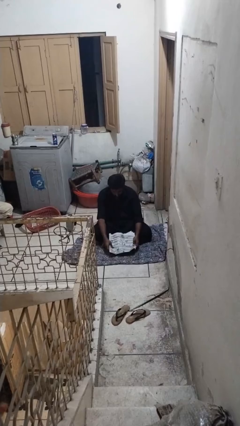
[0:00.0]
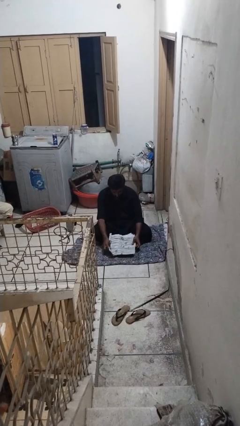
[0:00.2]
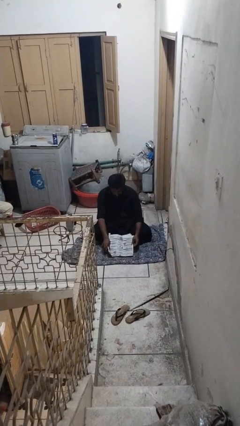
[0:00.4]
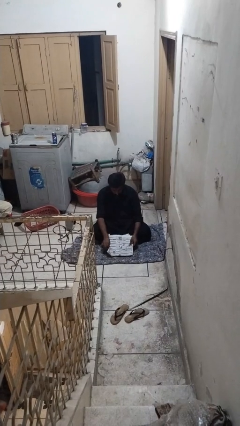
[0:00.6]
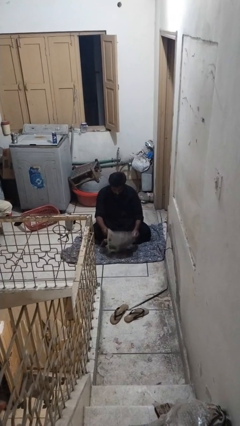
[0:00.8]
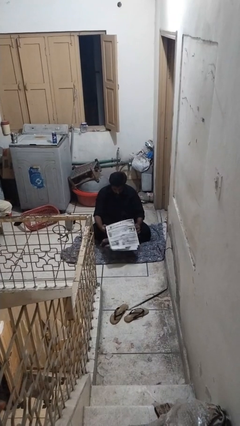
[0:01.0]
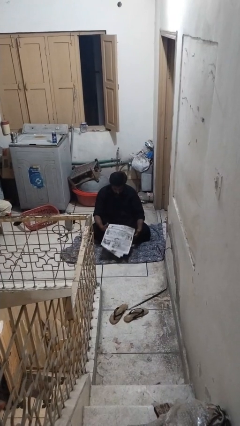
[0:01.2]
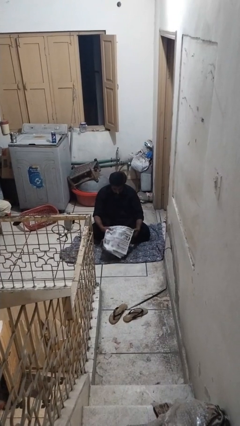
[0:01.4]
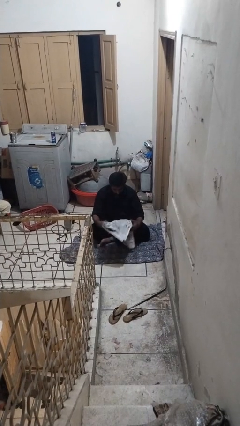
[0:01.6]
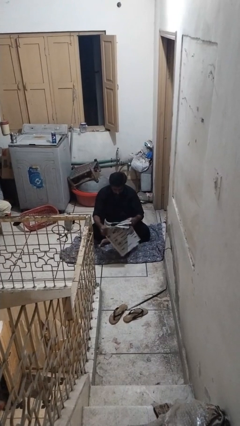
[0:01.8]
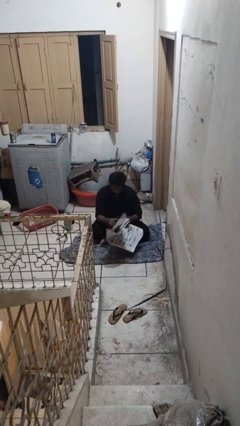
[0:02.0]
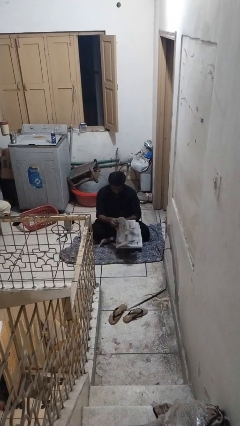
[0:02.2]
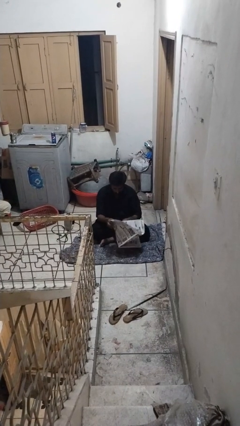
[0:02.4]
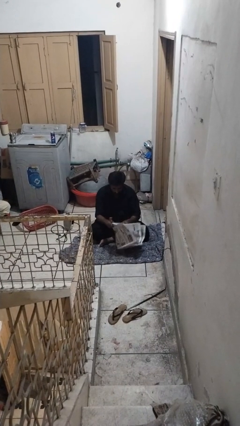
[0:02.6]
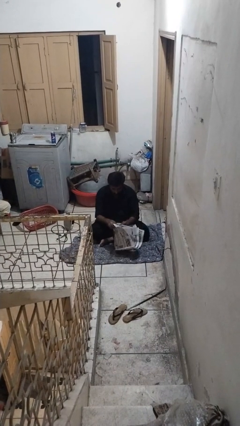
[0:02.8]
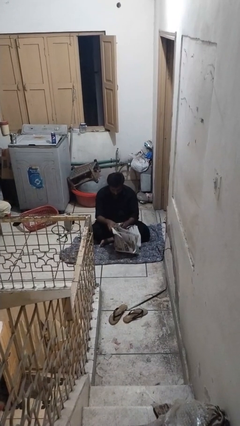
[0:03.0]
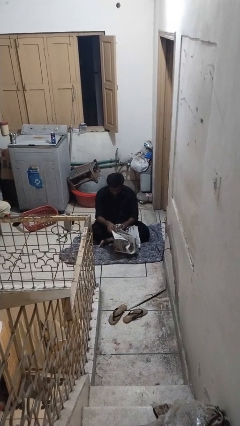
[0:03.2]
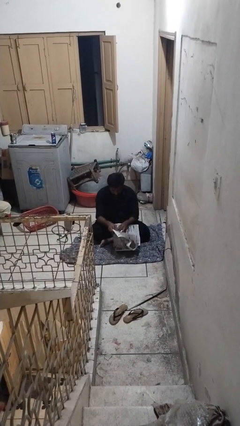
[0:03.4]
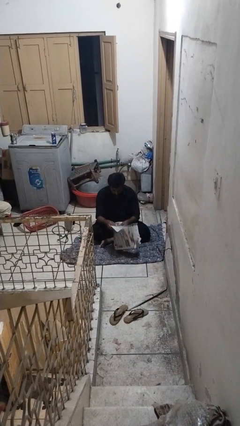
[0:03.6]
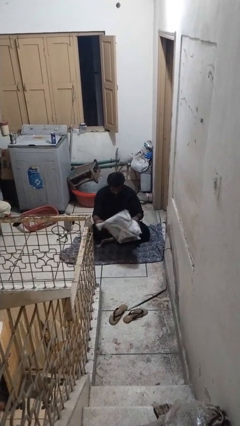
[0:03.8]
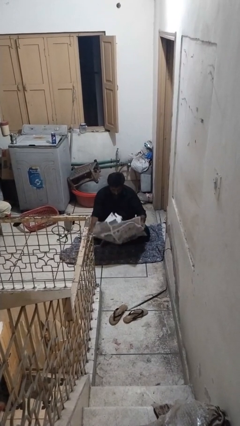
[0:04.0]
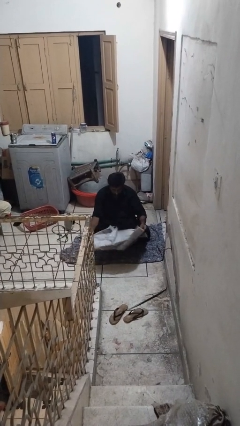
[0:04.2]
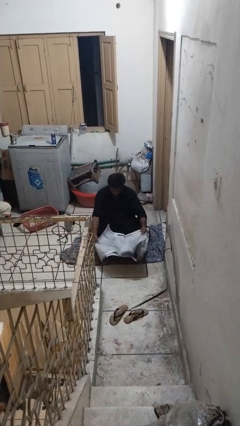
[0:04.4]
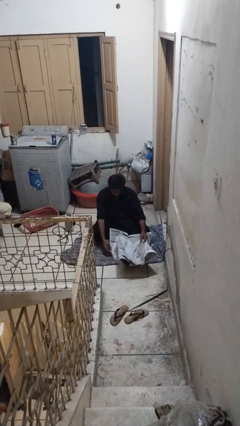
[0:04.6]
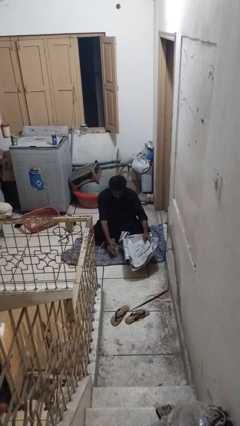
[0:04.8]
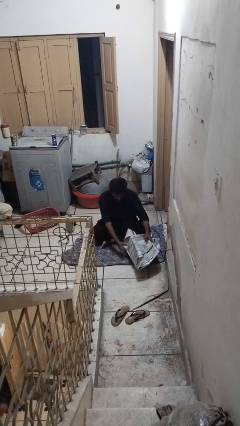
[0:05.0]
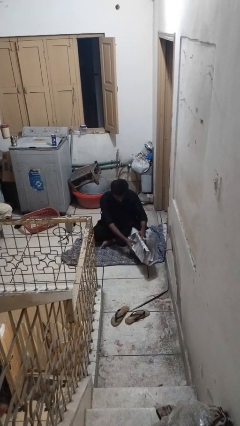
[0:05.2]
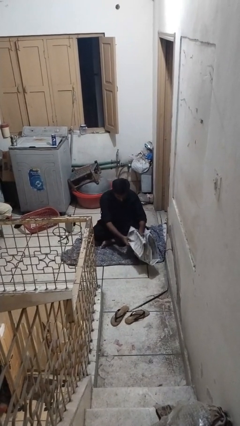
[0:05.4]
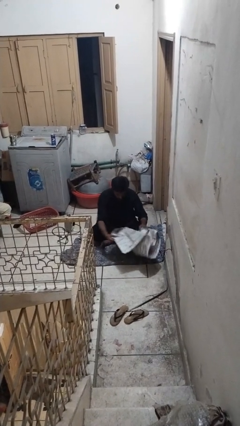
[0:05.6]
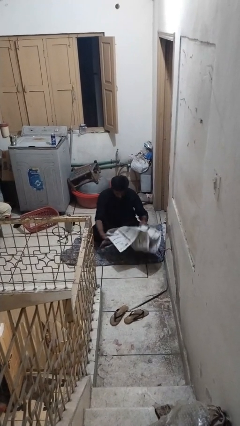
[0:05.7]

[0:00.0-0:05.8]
person reads newspaper

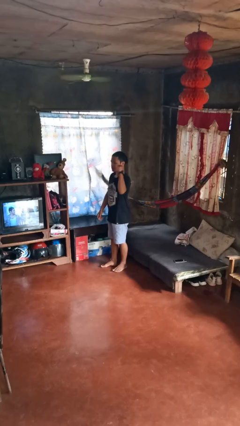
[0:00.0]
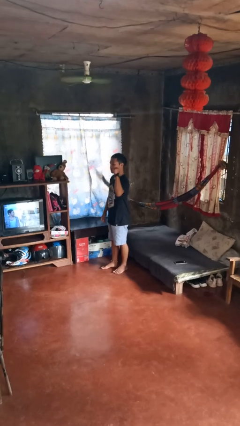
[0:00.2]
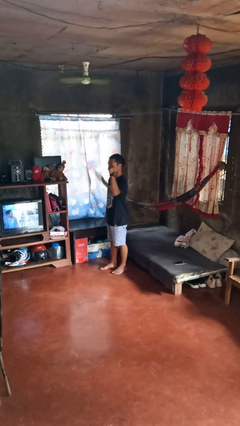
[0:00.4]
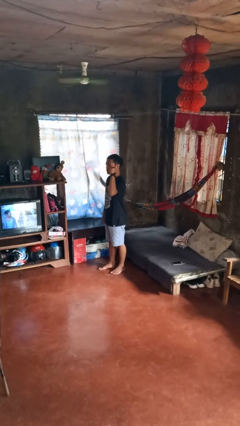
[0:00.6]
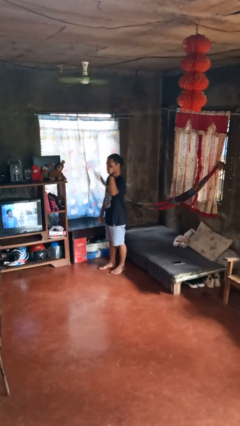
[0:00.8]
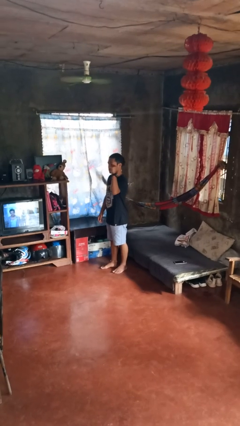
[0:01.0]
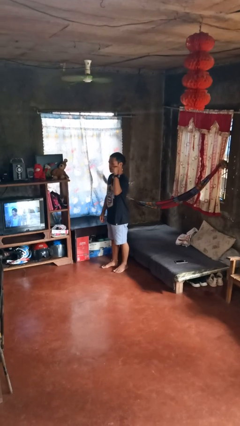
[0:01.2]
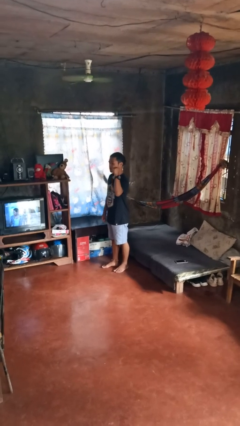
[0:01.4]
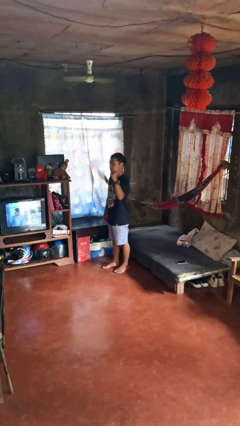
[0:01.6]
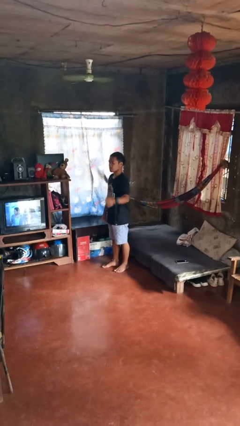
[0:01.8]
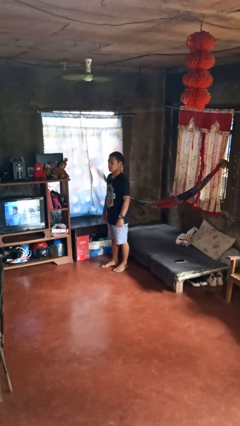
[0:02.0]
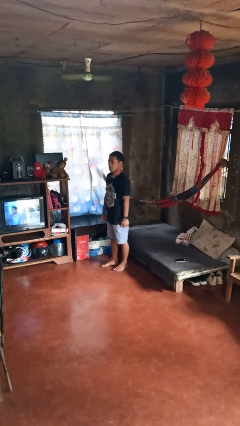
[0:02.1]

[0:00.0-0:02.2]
person gestures behind me

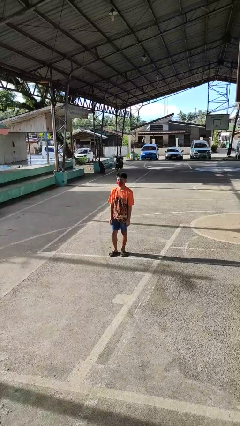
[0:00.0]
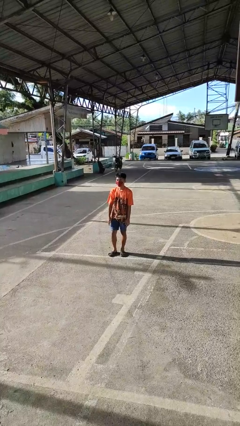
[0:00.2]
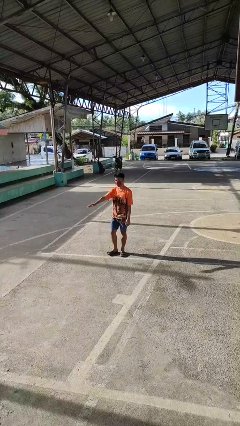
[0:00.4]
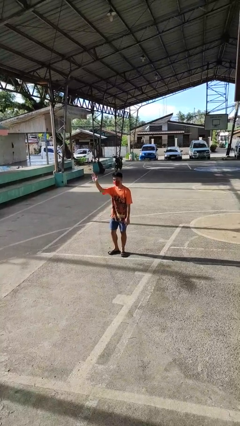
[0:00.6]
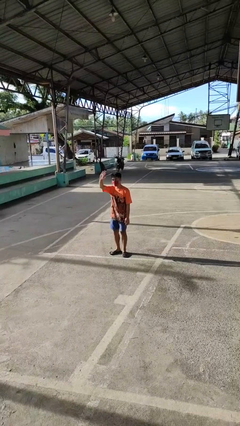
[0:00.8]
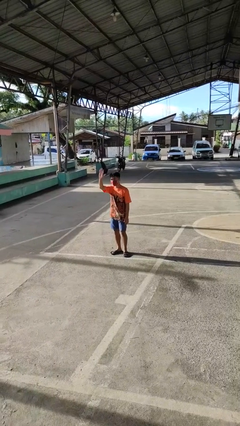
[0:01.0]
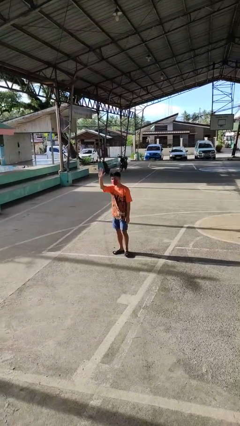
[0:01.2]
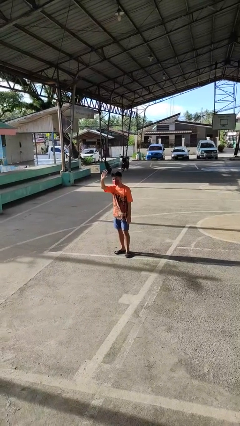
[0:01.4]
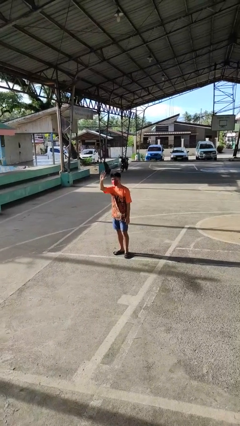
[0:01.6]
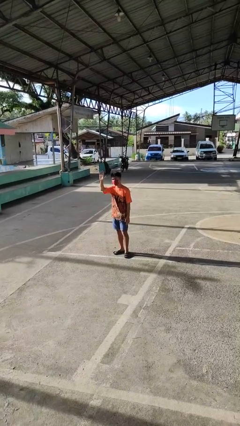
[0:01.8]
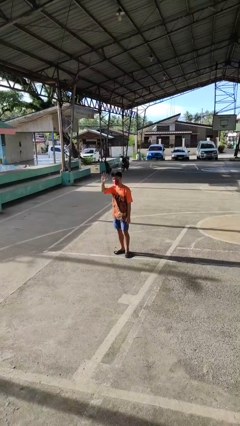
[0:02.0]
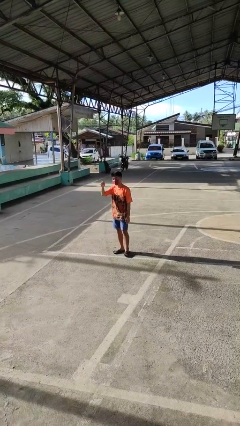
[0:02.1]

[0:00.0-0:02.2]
person waves at person

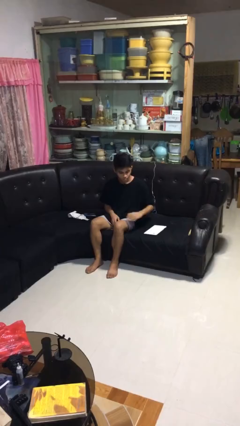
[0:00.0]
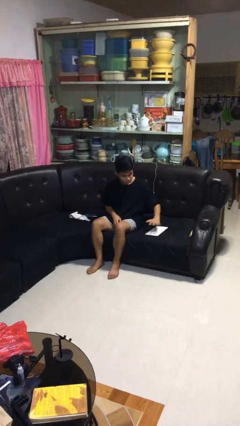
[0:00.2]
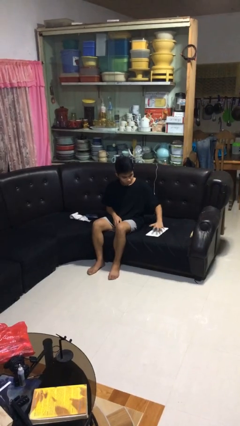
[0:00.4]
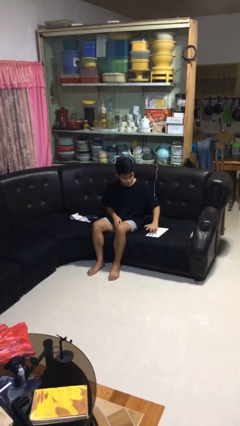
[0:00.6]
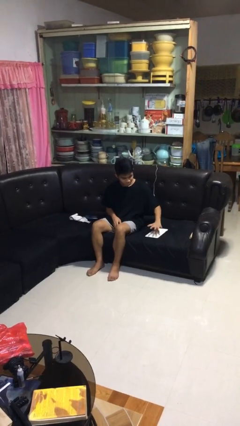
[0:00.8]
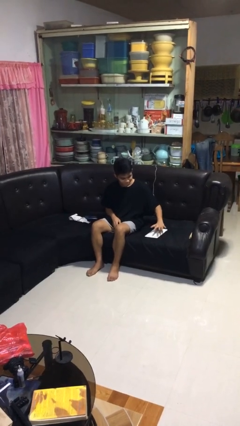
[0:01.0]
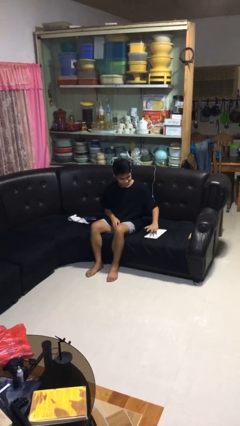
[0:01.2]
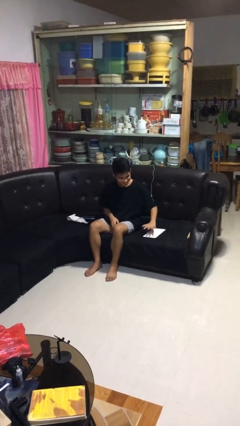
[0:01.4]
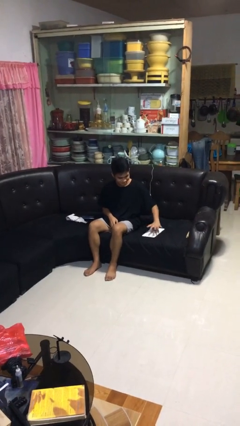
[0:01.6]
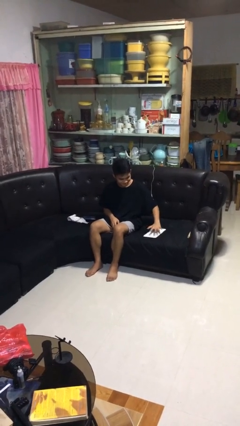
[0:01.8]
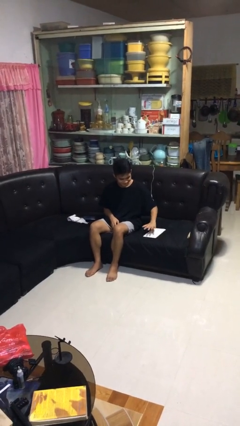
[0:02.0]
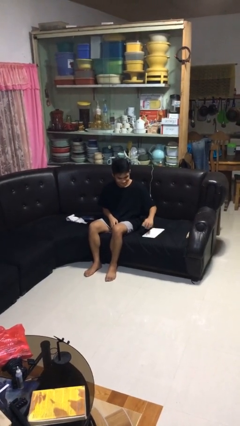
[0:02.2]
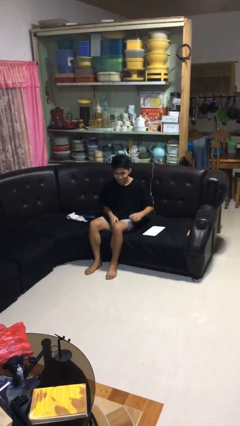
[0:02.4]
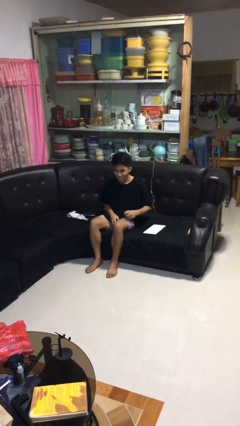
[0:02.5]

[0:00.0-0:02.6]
person waves hand over object

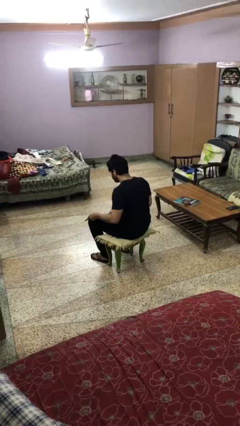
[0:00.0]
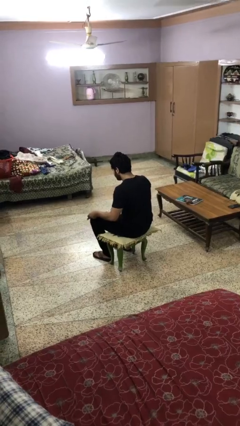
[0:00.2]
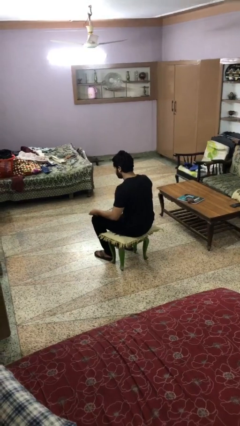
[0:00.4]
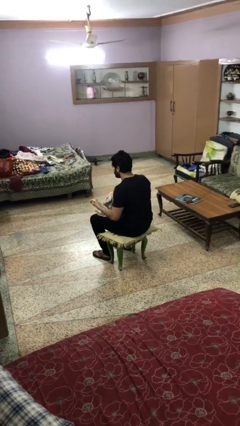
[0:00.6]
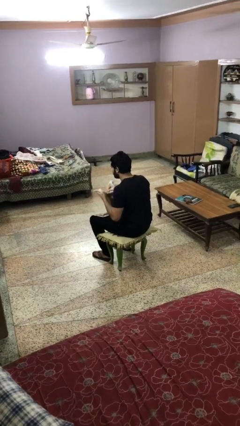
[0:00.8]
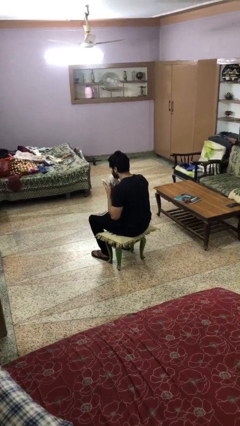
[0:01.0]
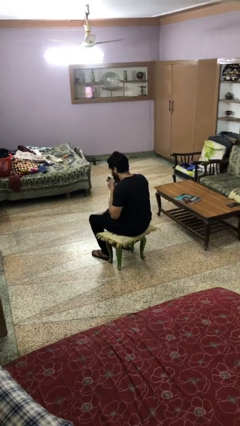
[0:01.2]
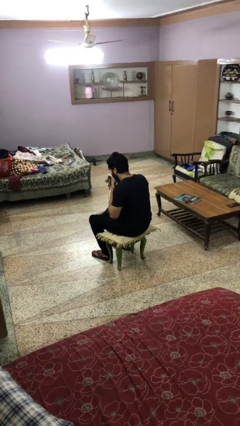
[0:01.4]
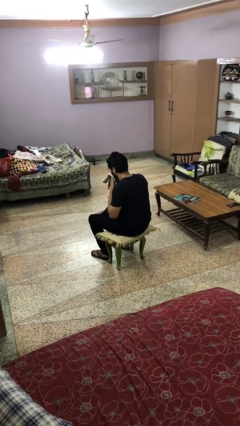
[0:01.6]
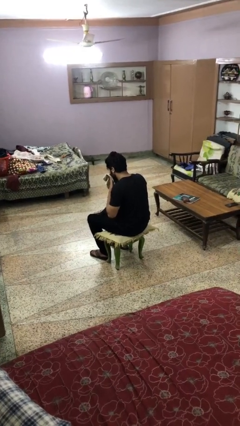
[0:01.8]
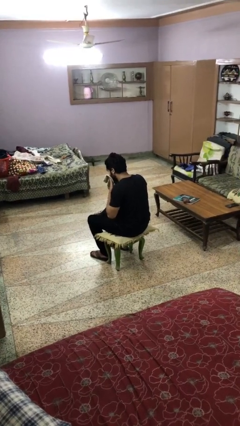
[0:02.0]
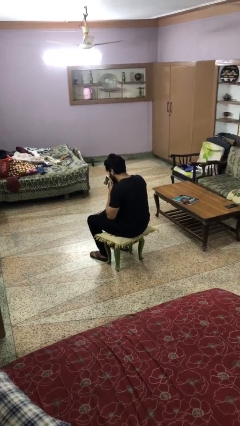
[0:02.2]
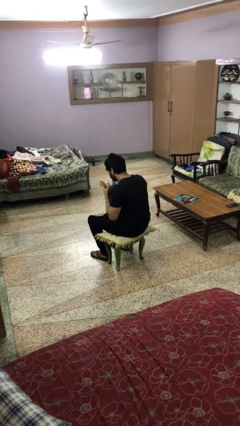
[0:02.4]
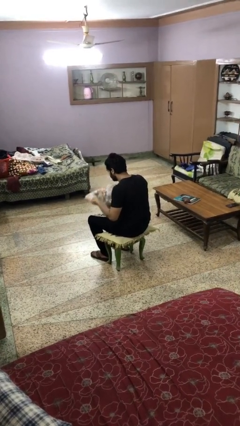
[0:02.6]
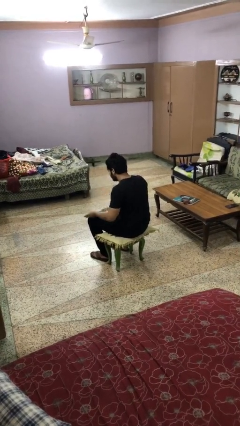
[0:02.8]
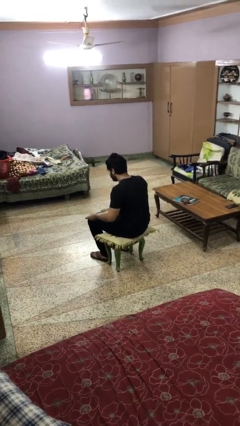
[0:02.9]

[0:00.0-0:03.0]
person wipes mouth with napkin

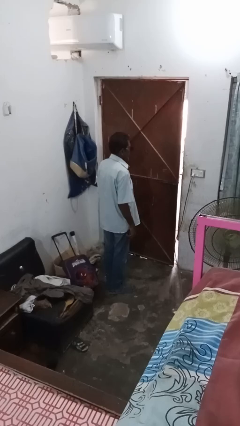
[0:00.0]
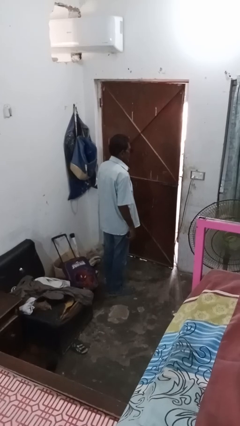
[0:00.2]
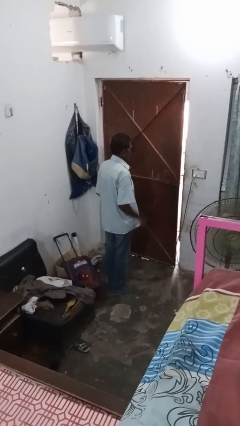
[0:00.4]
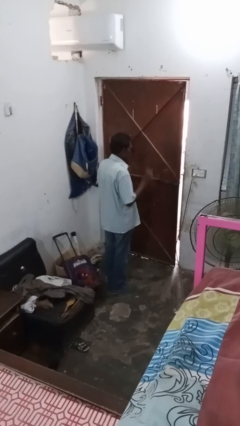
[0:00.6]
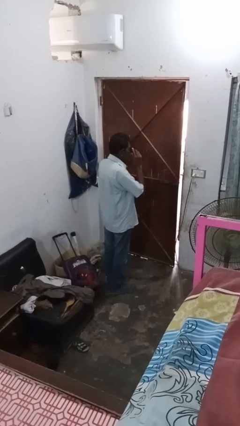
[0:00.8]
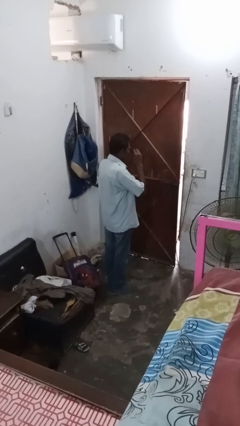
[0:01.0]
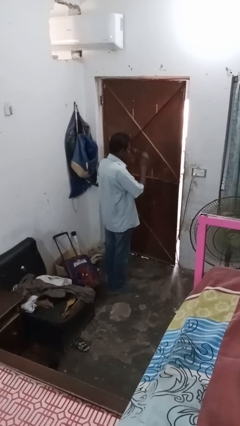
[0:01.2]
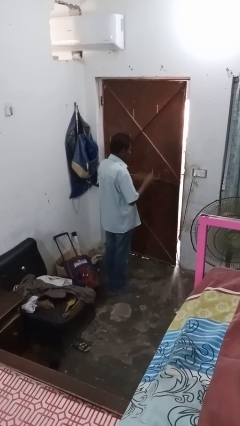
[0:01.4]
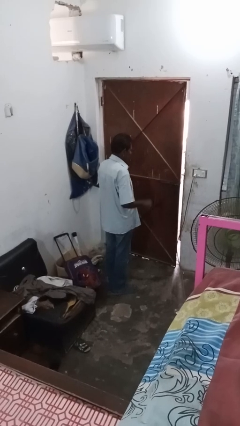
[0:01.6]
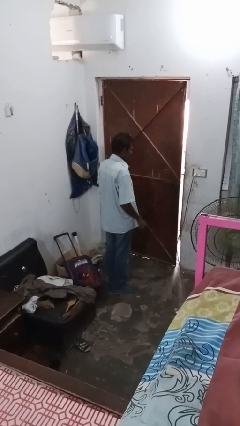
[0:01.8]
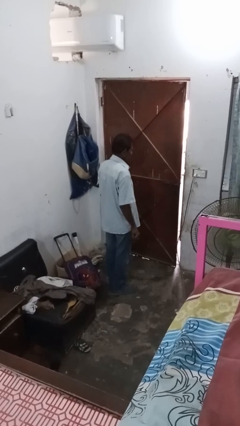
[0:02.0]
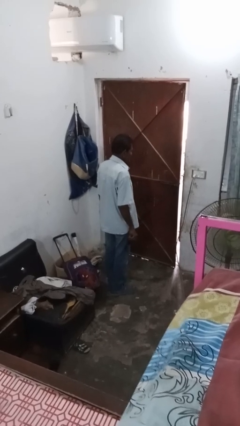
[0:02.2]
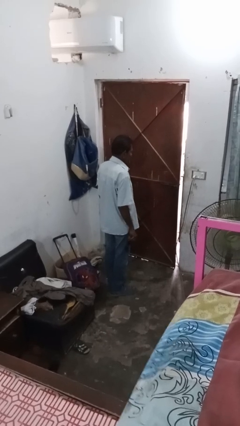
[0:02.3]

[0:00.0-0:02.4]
person takes off sunglasses
